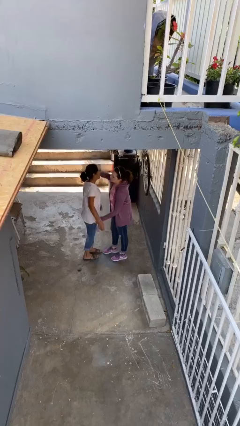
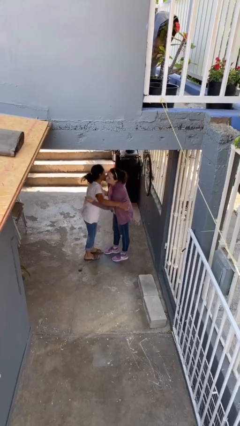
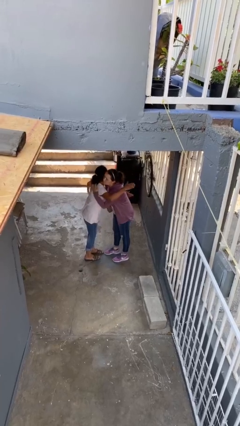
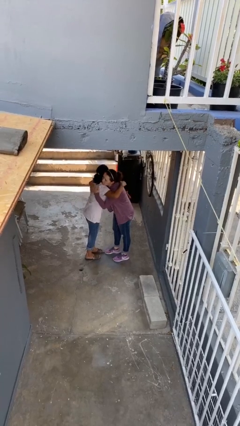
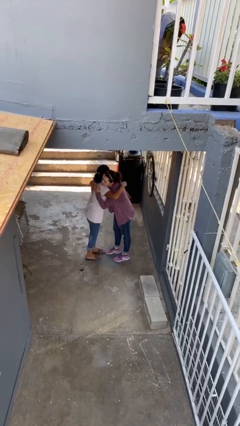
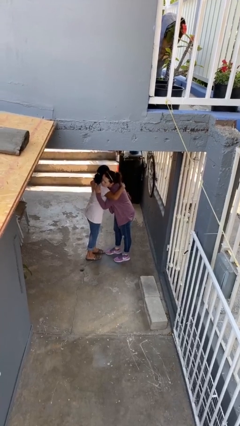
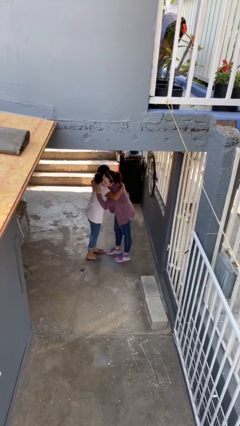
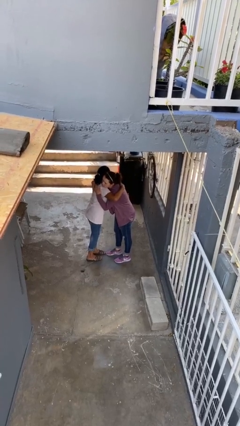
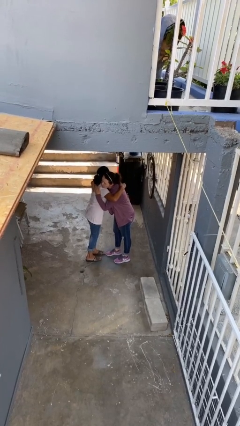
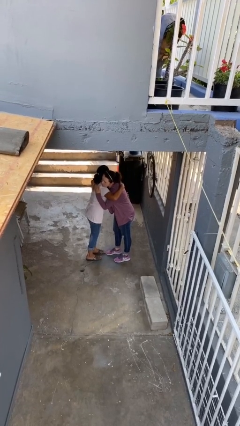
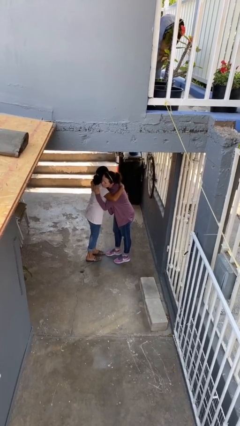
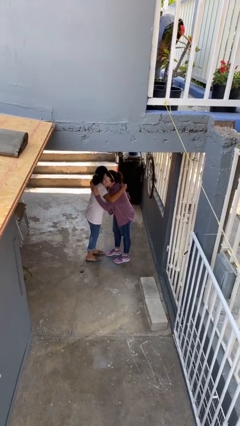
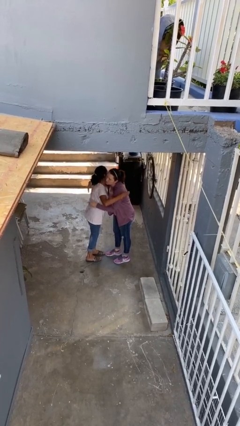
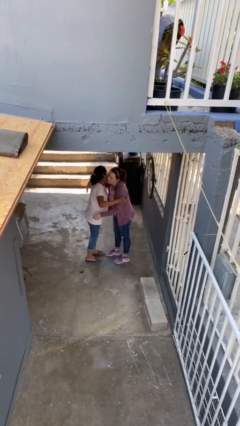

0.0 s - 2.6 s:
person embraces person

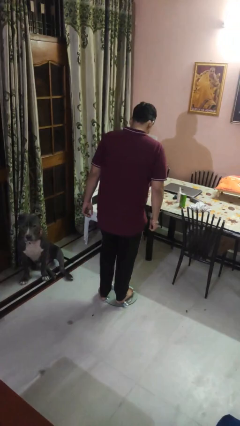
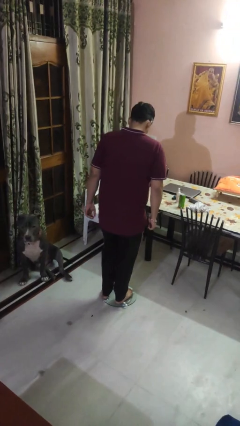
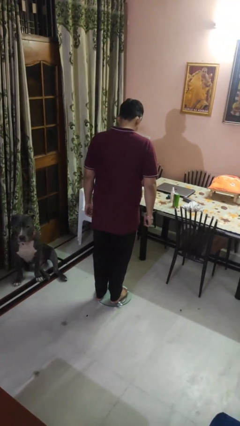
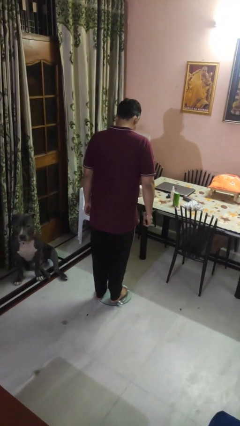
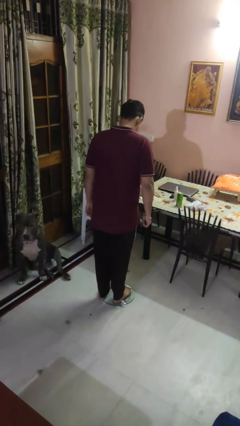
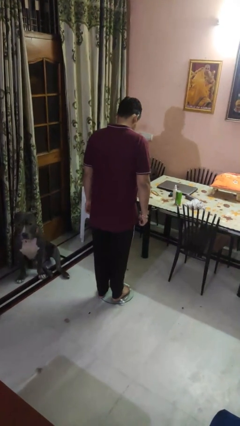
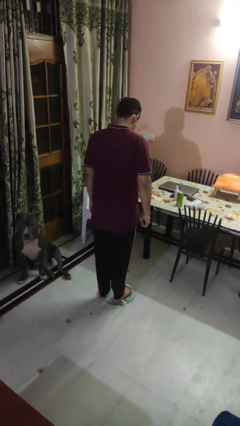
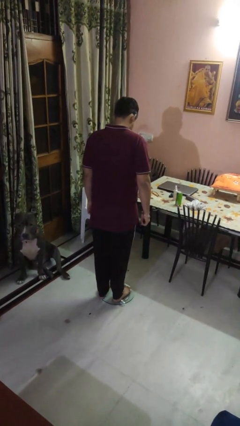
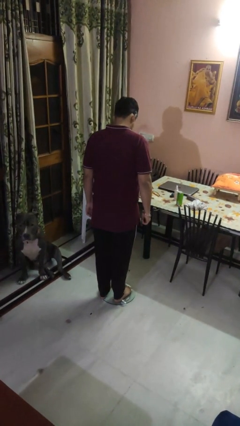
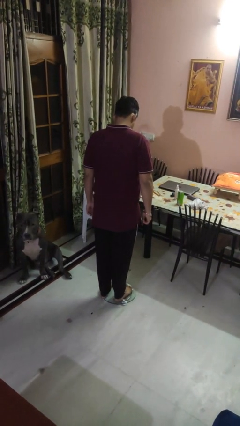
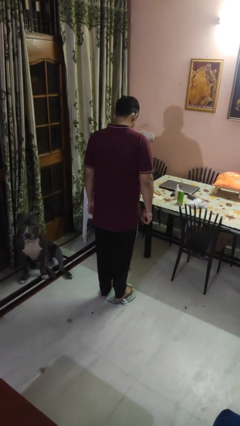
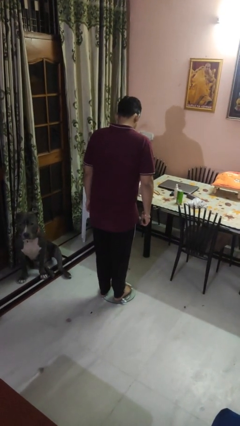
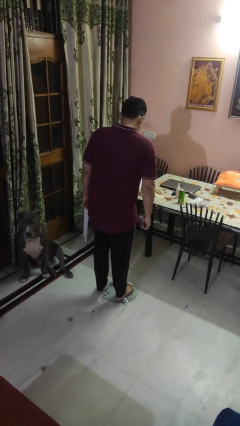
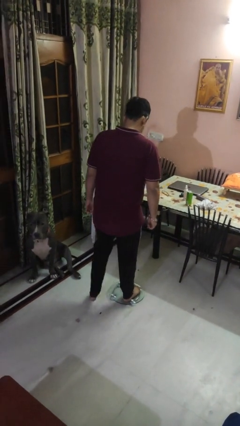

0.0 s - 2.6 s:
person uses bodyweight scale

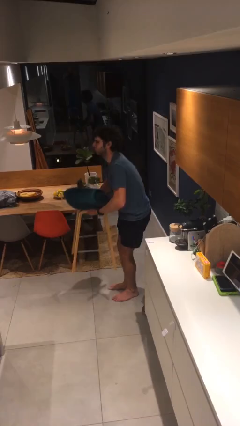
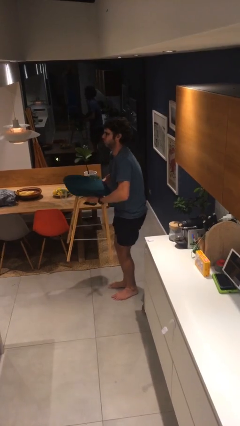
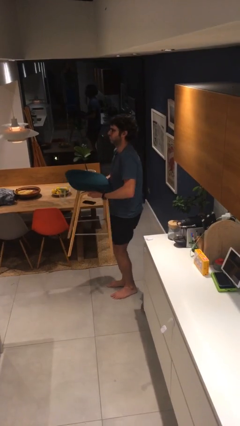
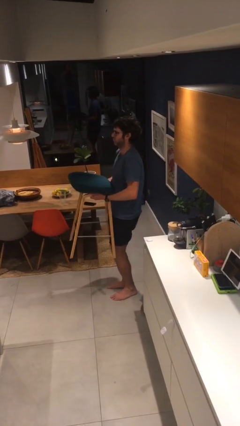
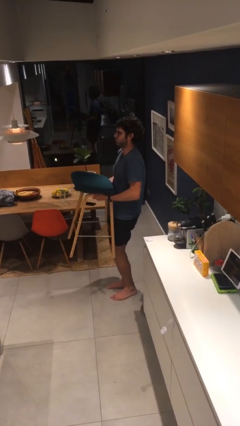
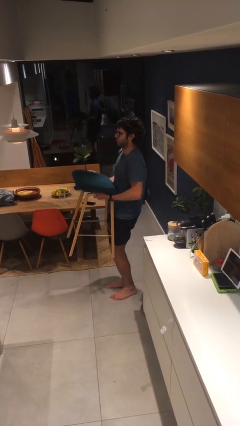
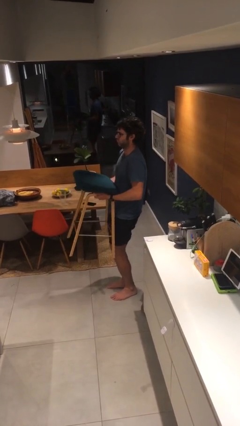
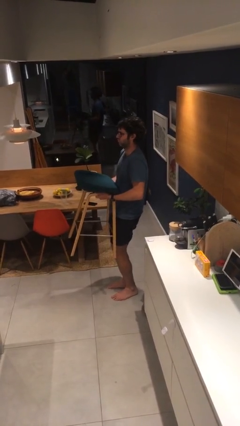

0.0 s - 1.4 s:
person picks up object from floor

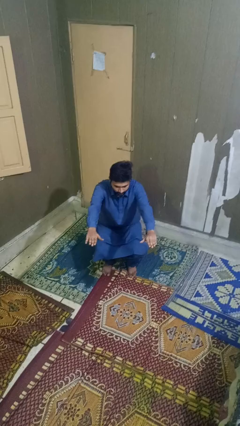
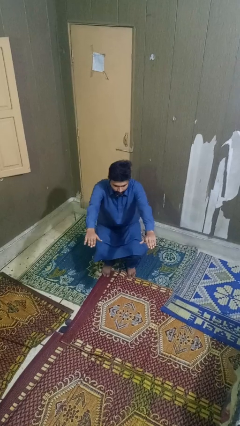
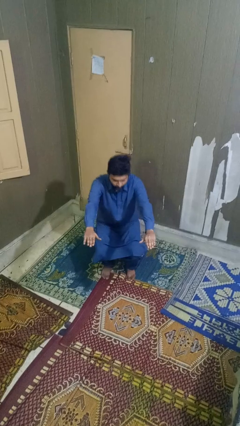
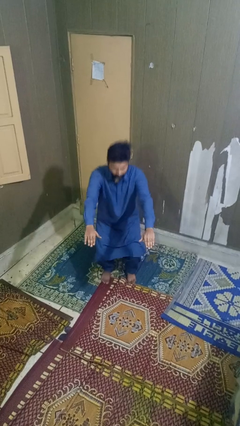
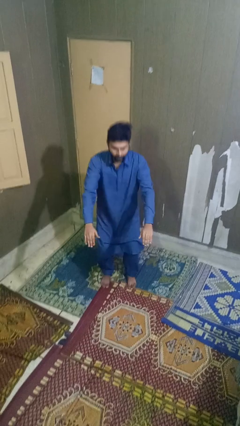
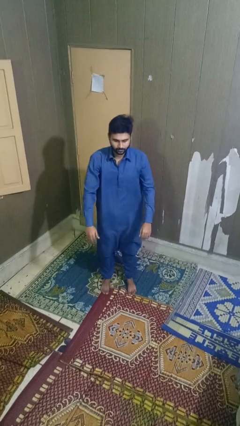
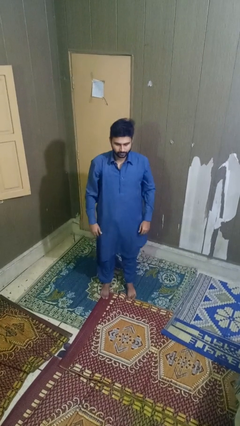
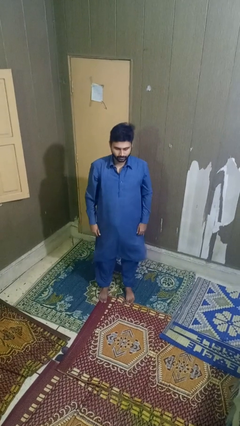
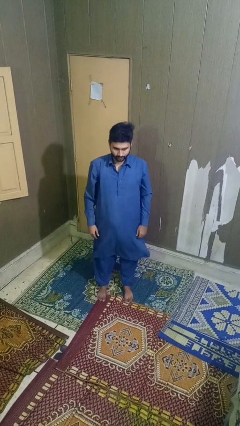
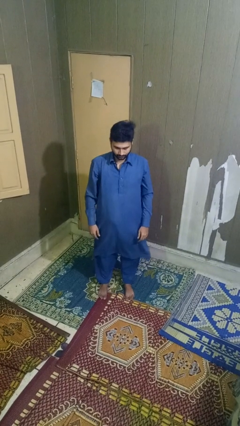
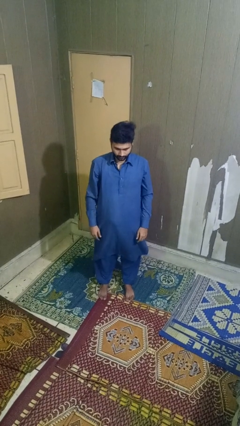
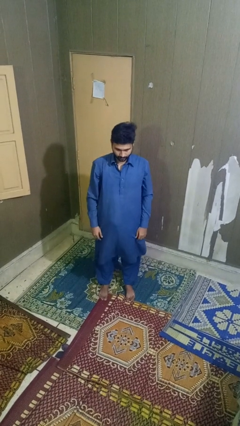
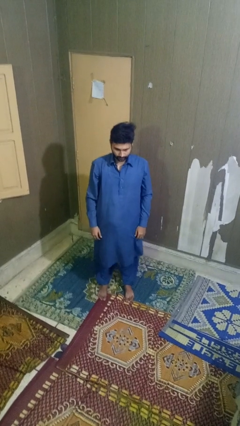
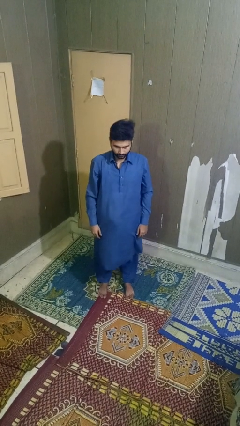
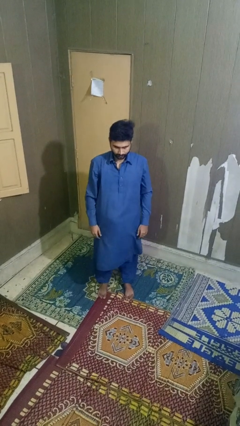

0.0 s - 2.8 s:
person stands up

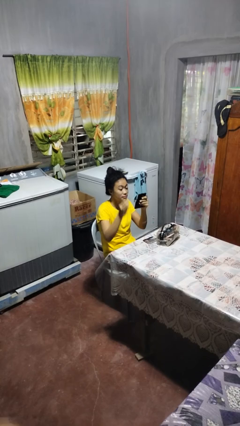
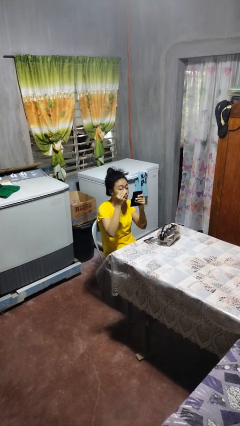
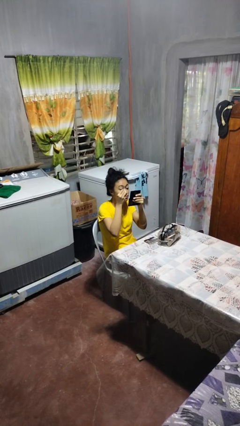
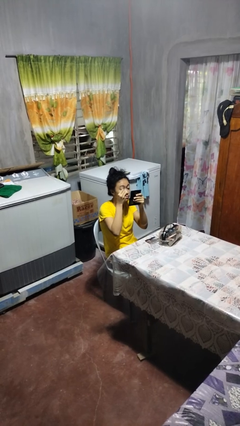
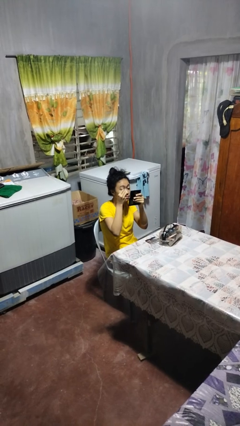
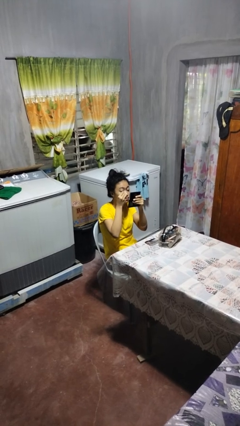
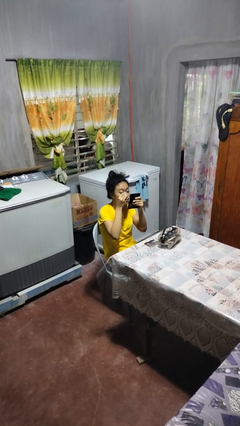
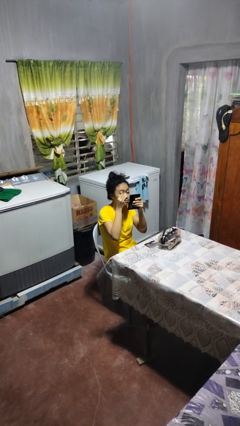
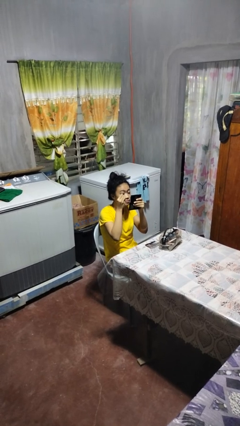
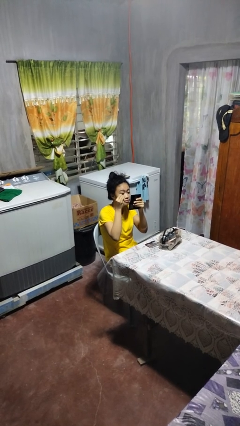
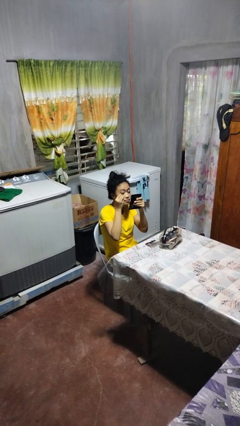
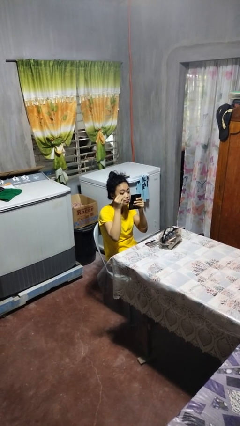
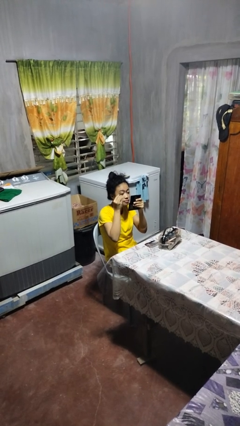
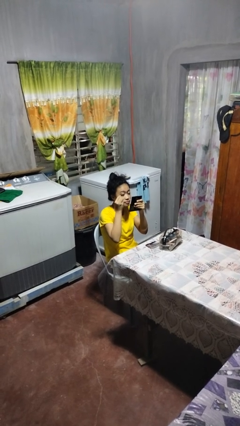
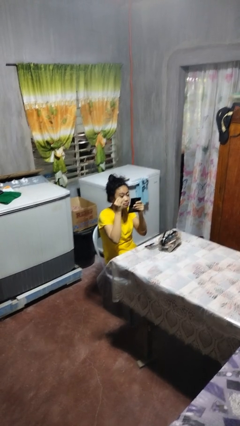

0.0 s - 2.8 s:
person applies eye makeup

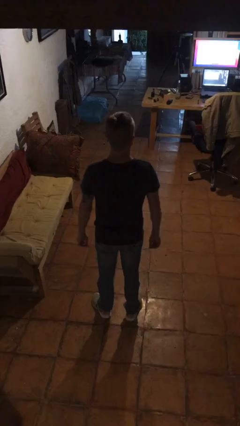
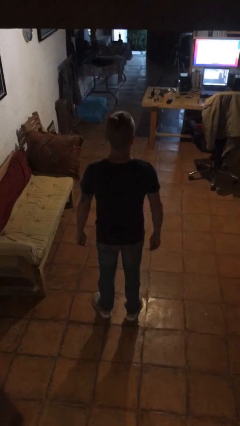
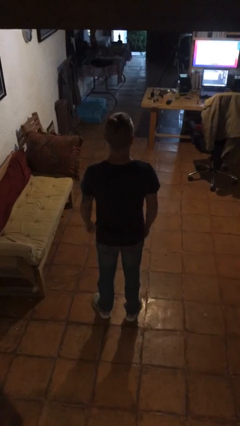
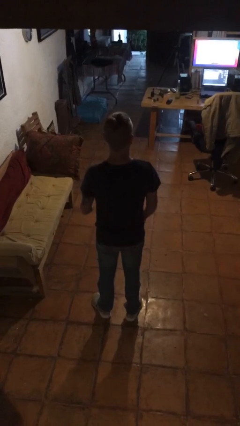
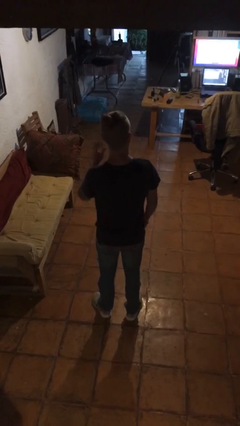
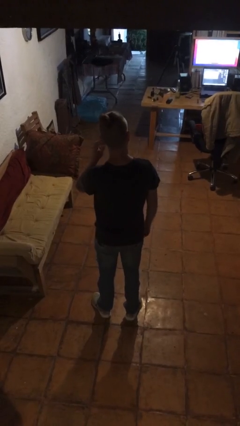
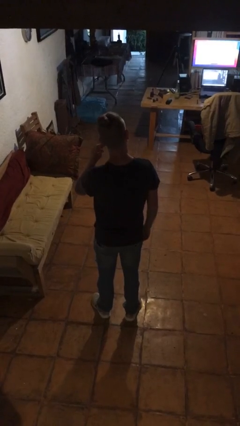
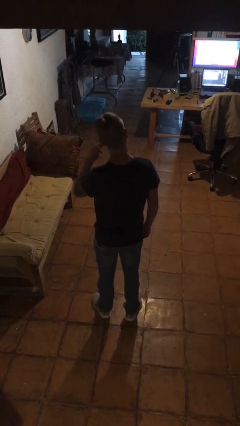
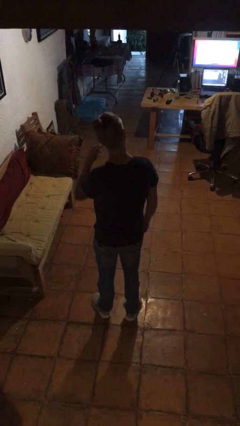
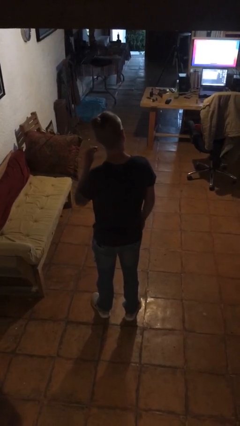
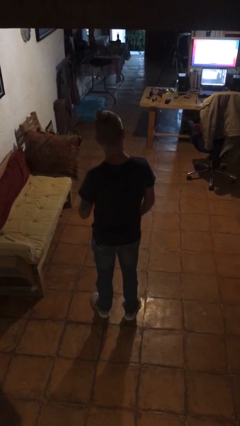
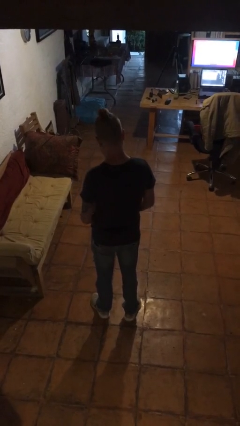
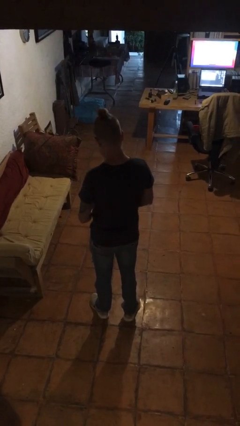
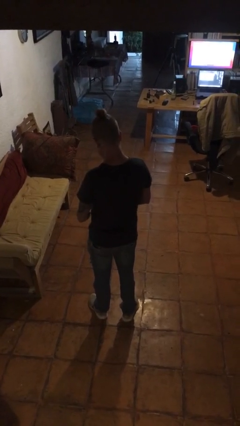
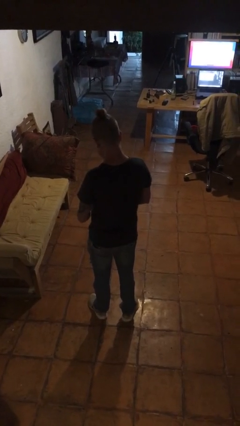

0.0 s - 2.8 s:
person takes off earrings

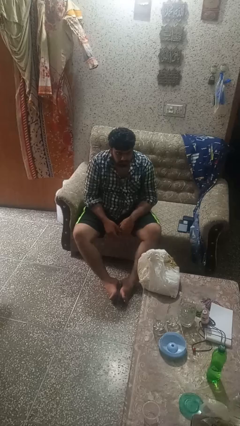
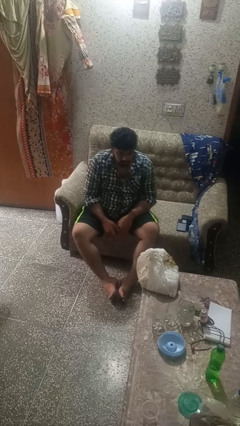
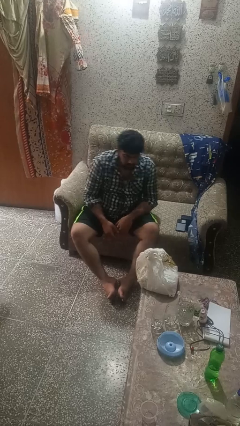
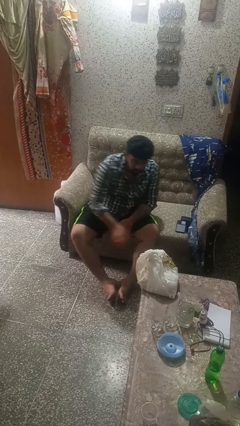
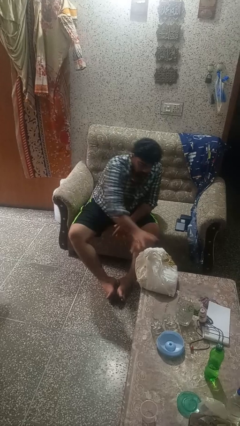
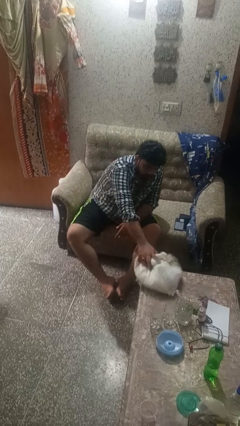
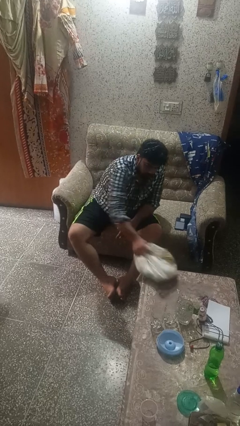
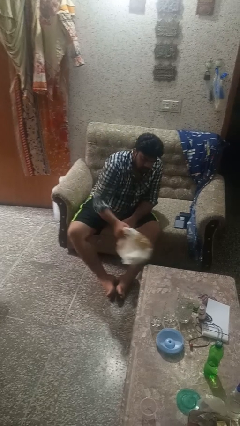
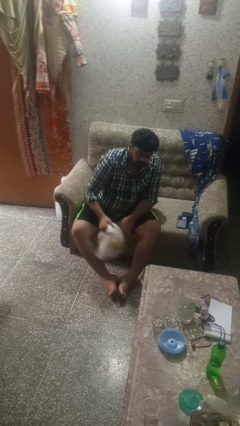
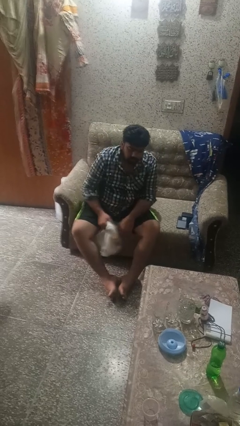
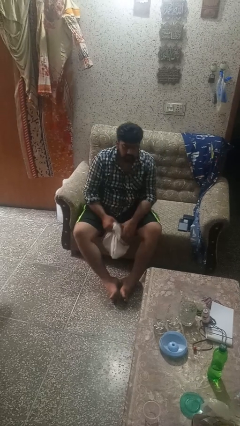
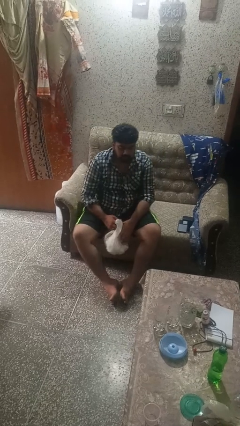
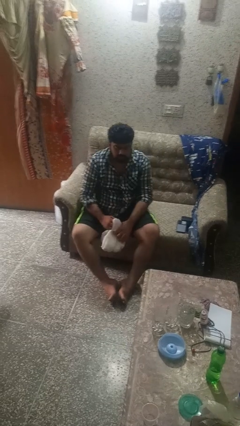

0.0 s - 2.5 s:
person picks up object from table
